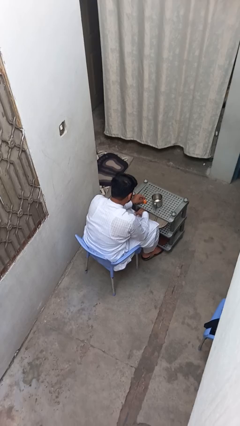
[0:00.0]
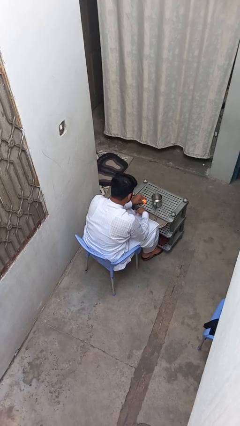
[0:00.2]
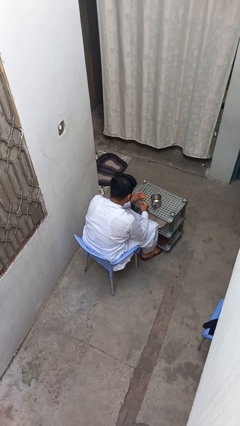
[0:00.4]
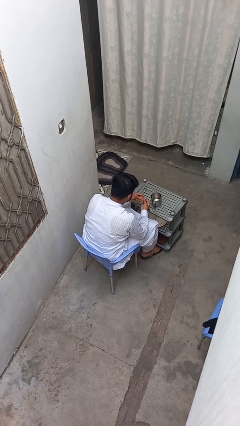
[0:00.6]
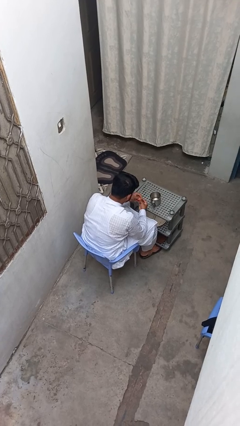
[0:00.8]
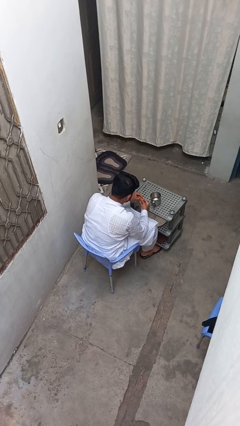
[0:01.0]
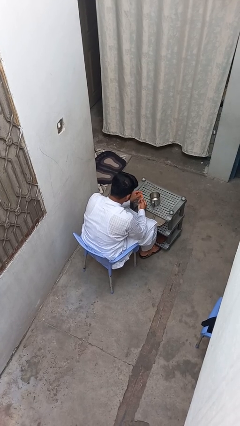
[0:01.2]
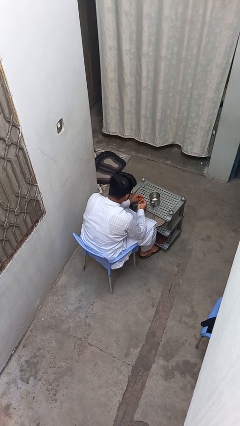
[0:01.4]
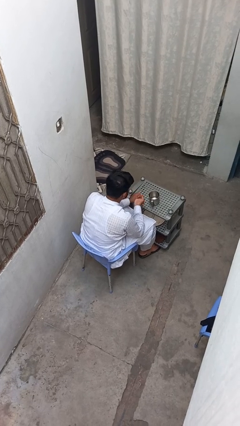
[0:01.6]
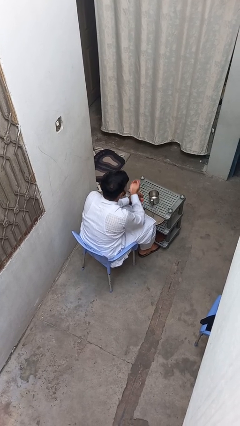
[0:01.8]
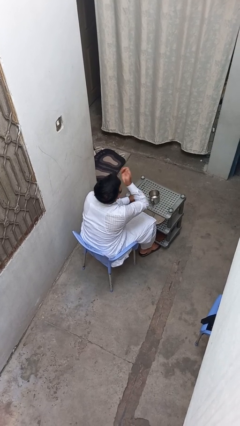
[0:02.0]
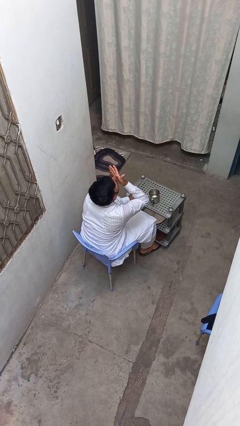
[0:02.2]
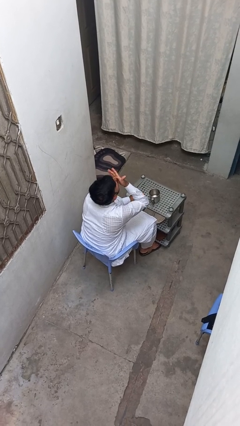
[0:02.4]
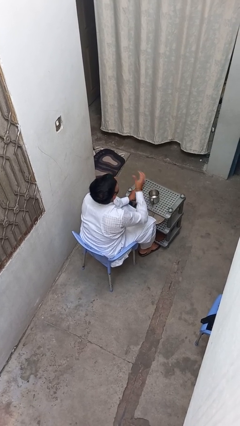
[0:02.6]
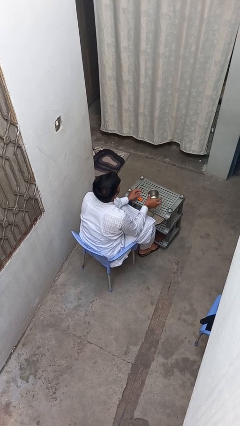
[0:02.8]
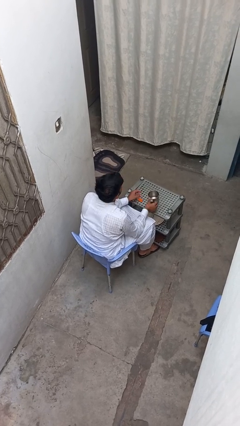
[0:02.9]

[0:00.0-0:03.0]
person takes medicine pills

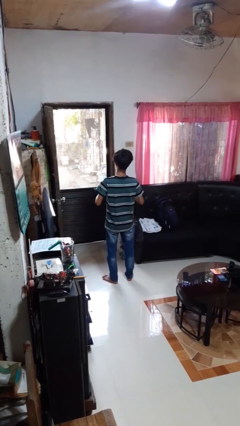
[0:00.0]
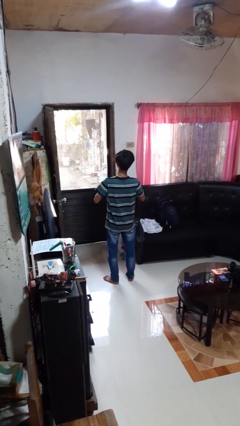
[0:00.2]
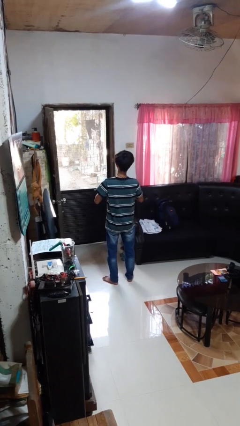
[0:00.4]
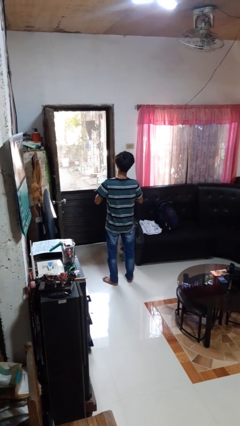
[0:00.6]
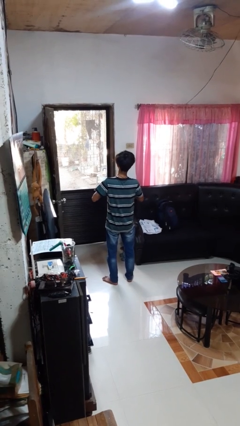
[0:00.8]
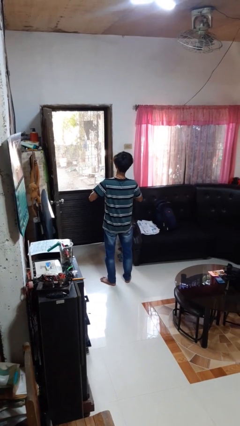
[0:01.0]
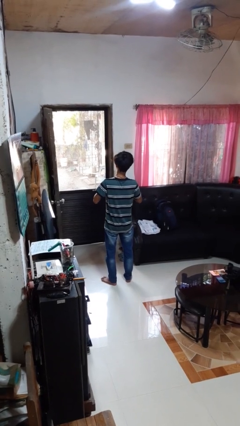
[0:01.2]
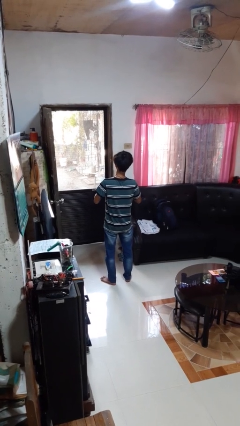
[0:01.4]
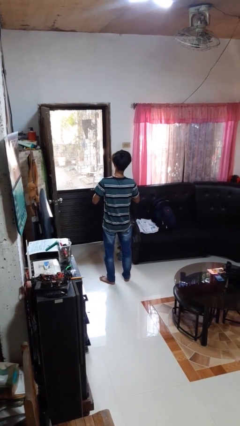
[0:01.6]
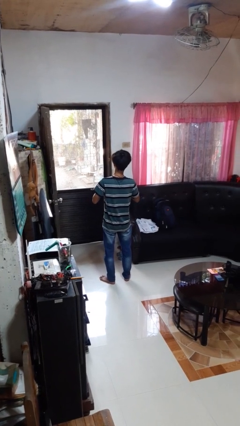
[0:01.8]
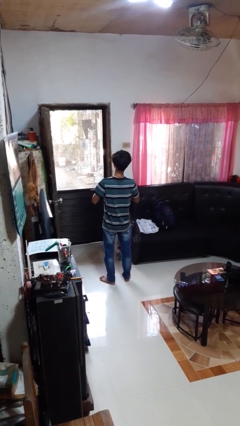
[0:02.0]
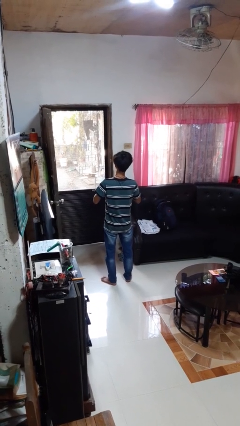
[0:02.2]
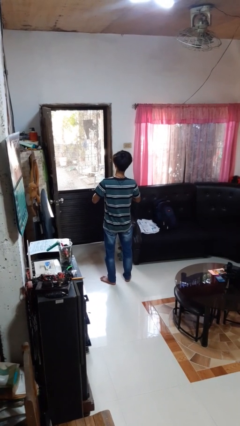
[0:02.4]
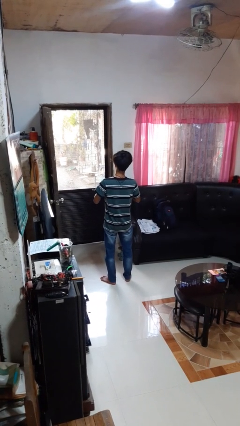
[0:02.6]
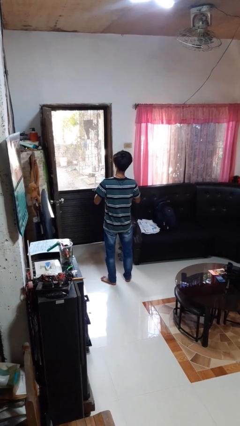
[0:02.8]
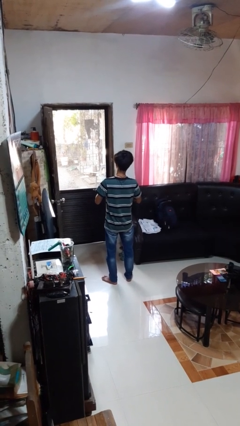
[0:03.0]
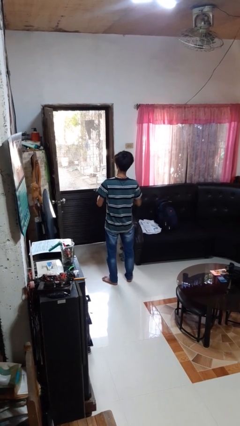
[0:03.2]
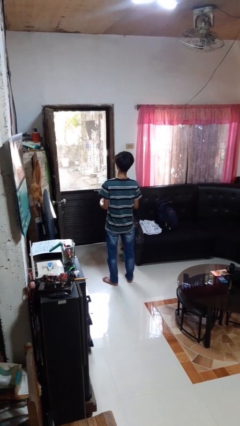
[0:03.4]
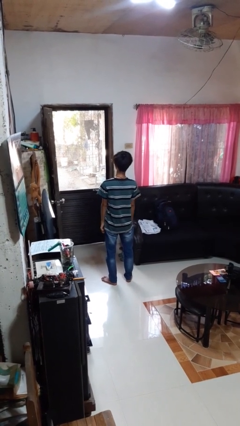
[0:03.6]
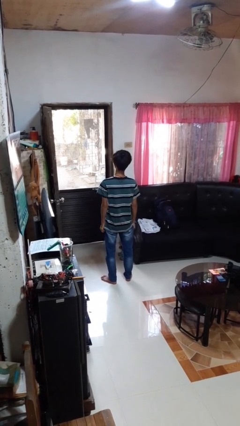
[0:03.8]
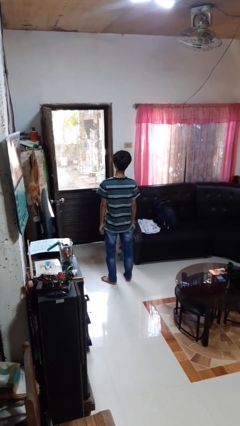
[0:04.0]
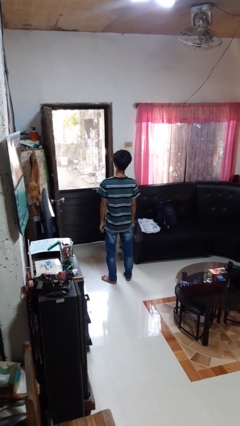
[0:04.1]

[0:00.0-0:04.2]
person unbuttons shirt

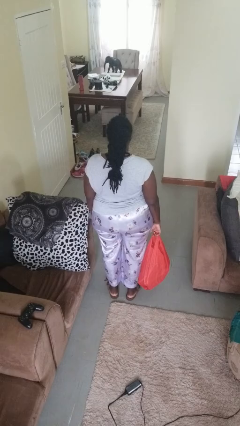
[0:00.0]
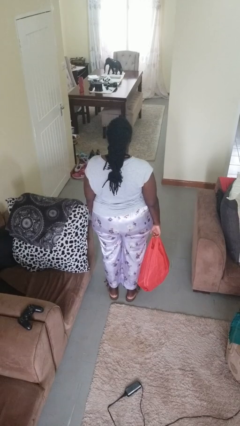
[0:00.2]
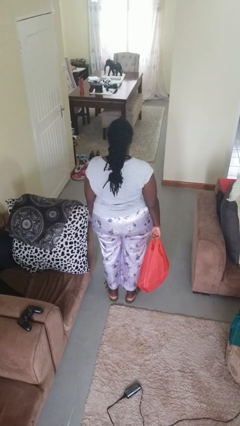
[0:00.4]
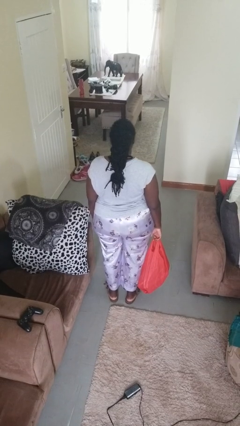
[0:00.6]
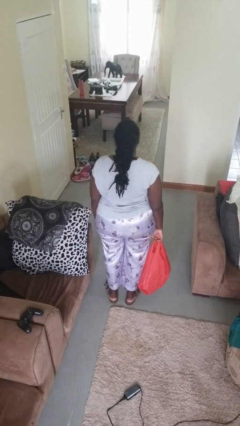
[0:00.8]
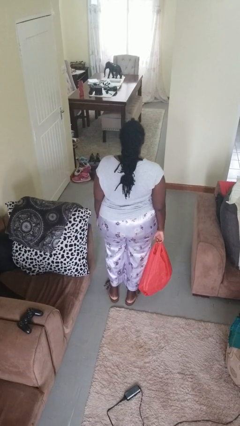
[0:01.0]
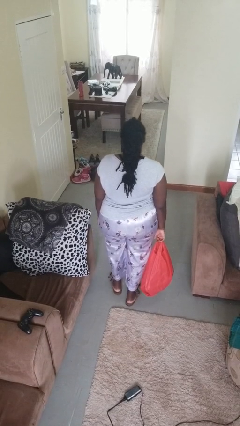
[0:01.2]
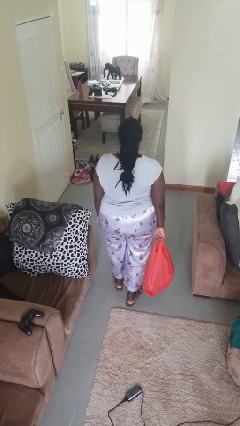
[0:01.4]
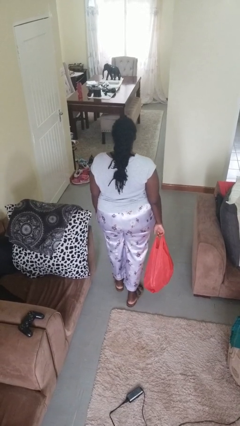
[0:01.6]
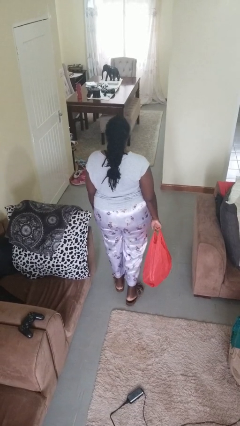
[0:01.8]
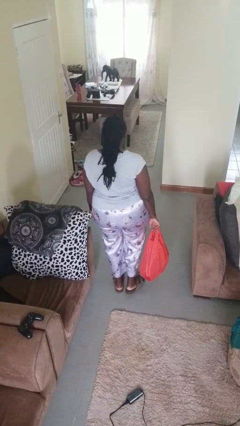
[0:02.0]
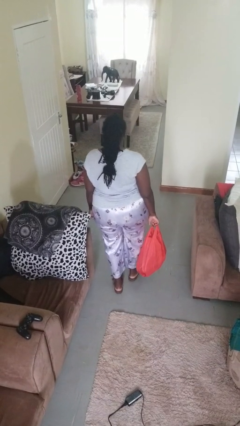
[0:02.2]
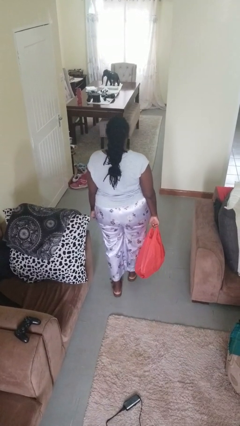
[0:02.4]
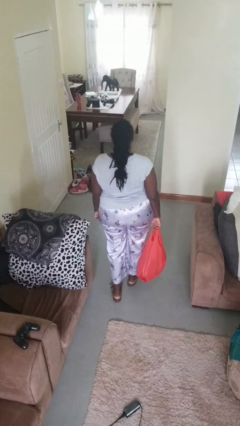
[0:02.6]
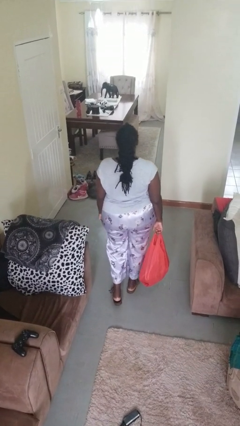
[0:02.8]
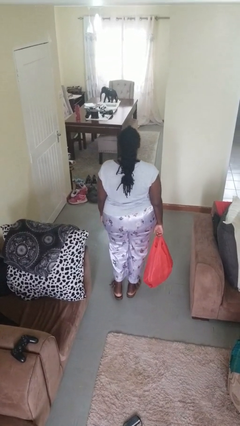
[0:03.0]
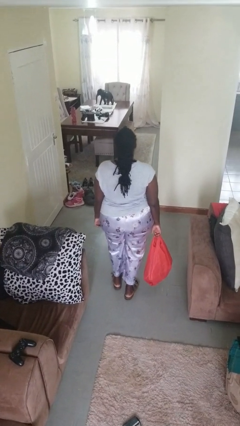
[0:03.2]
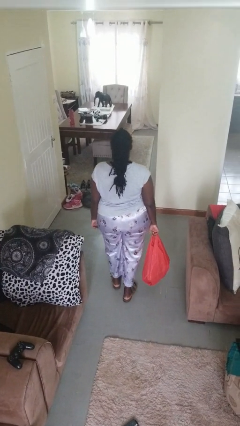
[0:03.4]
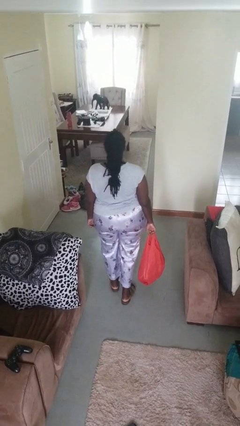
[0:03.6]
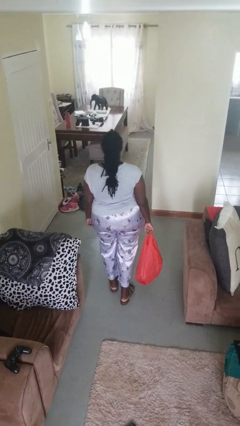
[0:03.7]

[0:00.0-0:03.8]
person carries groceries

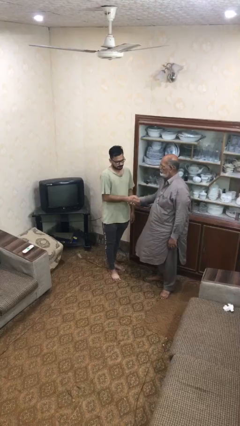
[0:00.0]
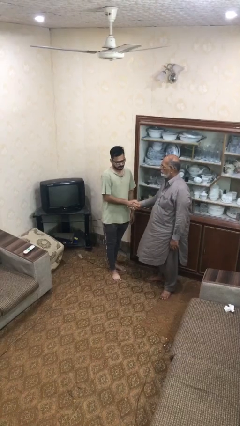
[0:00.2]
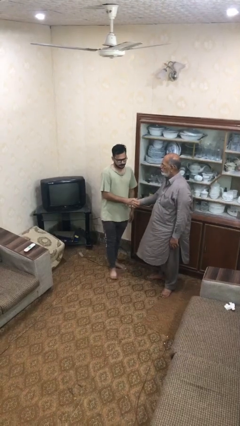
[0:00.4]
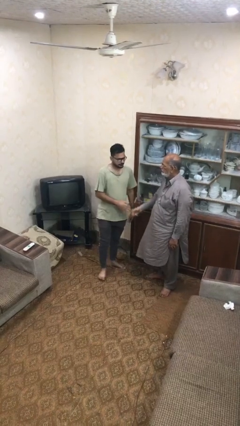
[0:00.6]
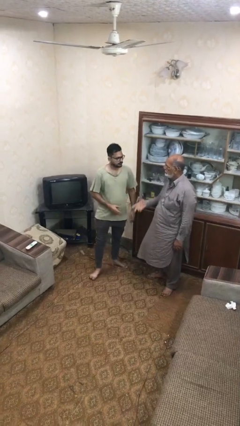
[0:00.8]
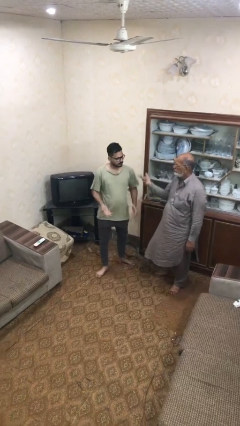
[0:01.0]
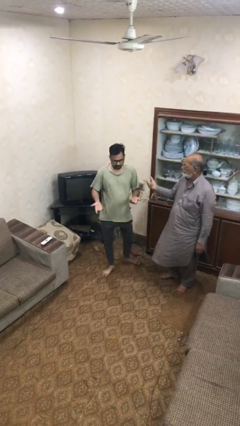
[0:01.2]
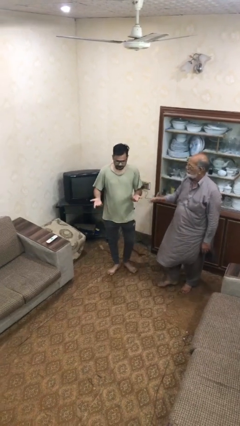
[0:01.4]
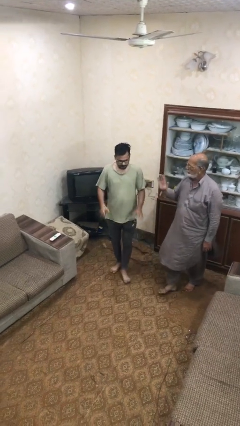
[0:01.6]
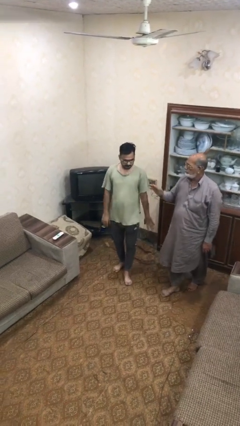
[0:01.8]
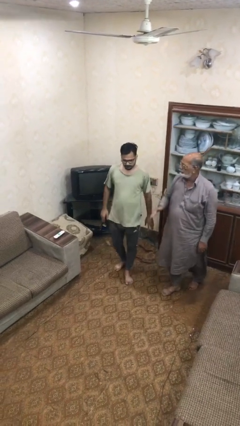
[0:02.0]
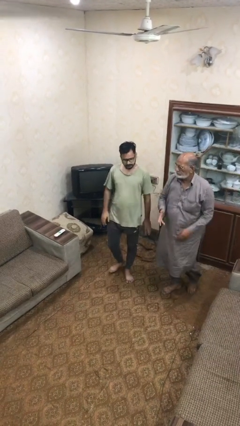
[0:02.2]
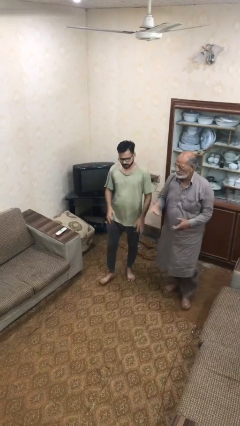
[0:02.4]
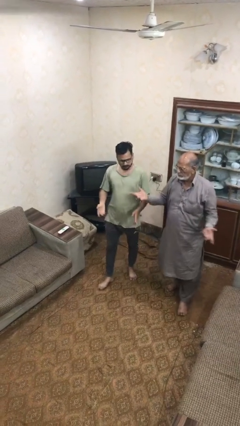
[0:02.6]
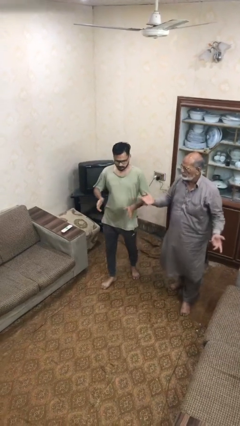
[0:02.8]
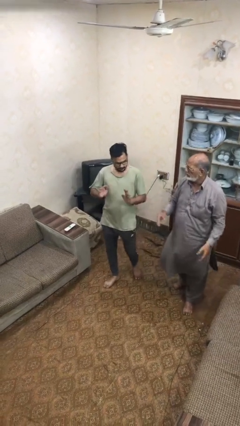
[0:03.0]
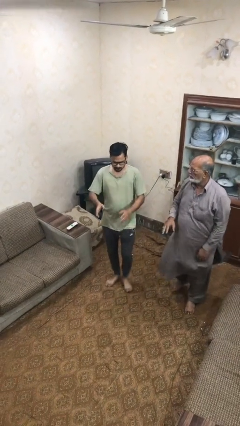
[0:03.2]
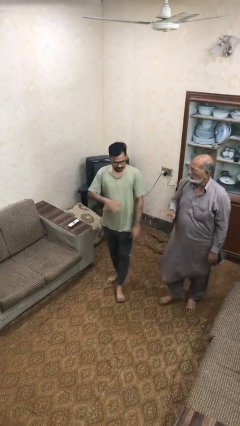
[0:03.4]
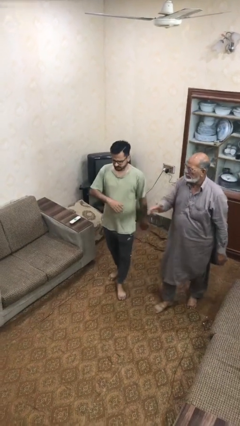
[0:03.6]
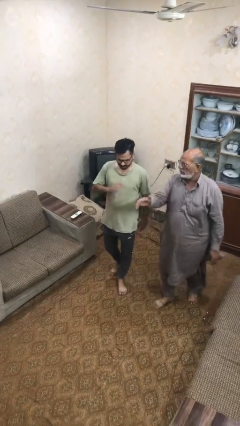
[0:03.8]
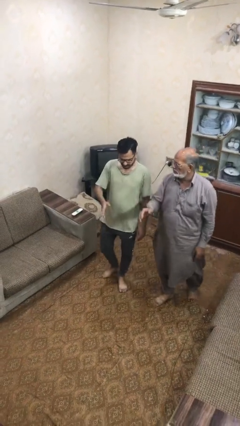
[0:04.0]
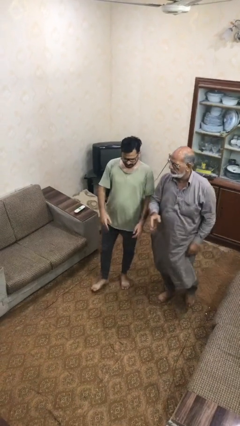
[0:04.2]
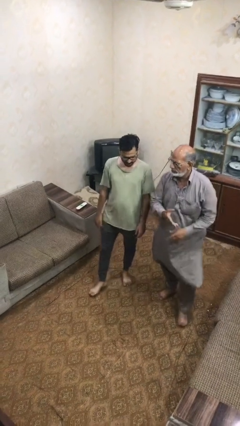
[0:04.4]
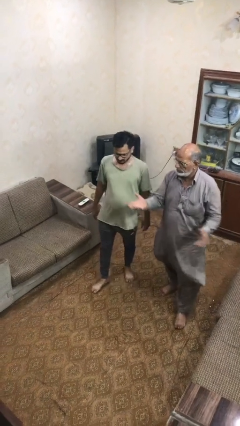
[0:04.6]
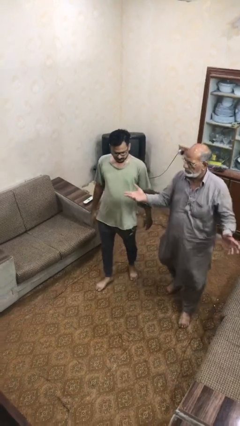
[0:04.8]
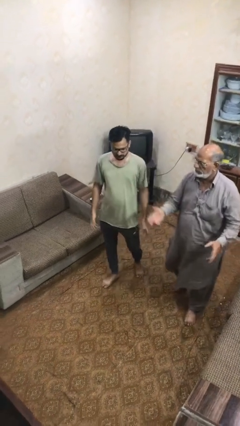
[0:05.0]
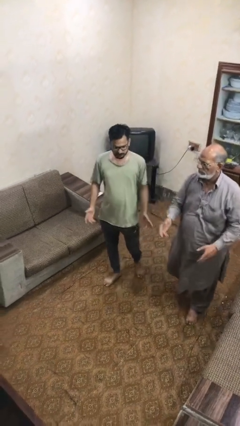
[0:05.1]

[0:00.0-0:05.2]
person talks to person

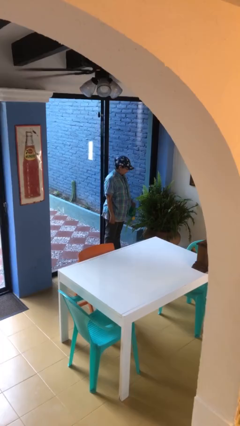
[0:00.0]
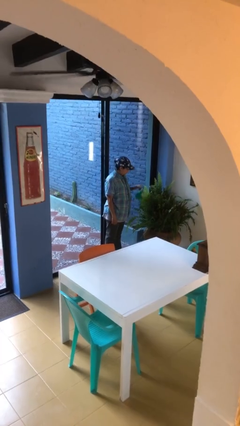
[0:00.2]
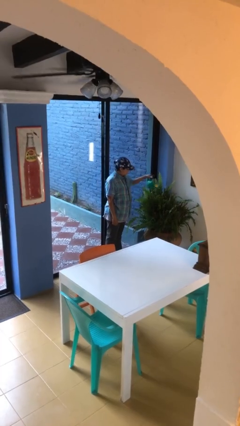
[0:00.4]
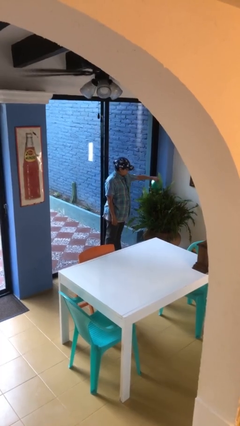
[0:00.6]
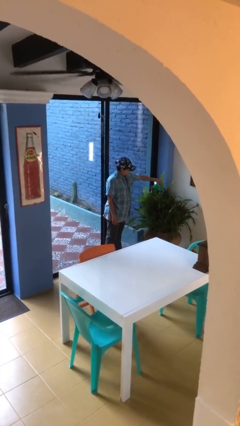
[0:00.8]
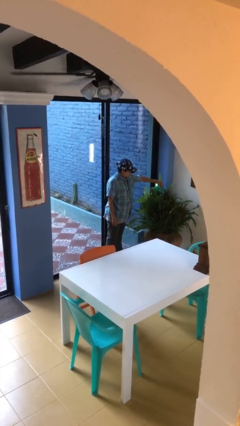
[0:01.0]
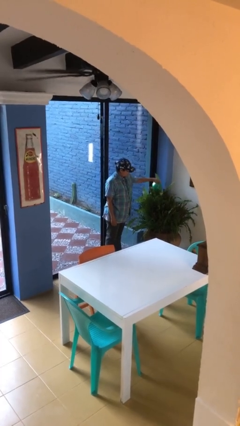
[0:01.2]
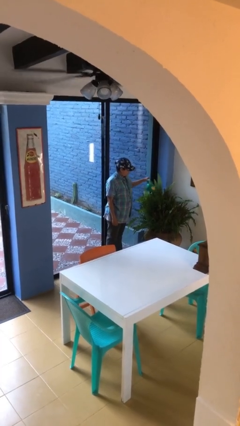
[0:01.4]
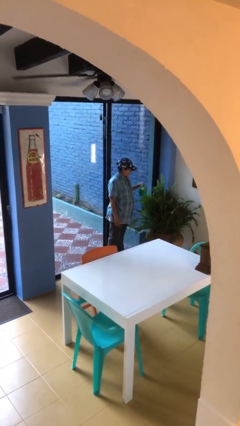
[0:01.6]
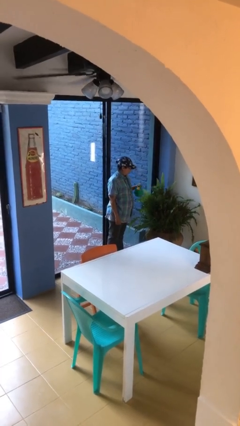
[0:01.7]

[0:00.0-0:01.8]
person waters houseplant
